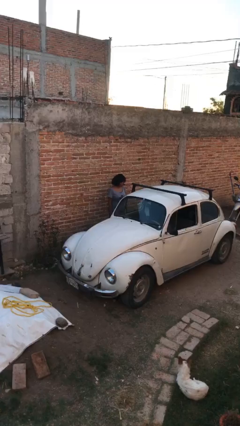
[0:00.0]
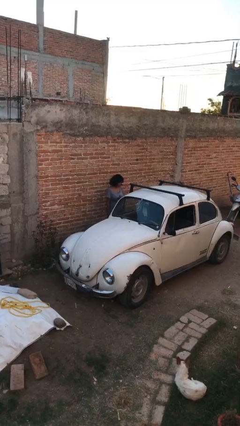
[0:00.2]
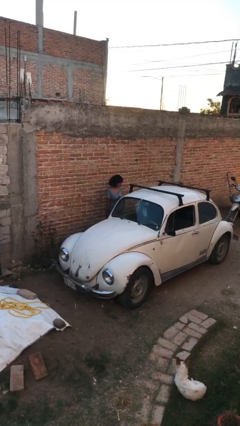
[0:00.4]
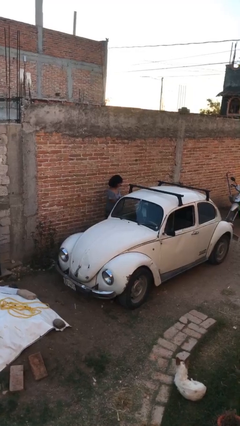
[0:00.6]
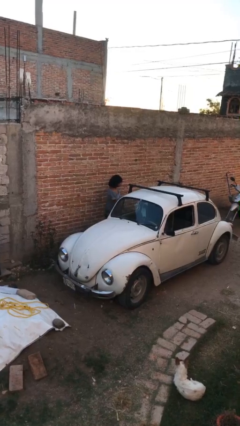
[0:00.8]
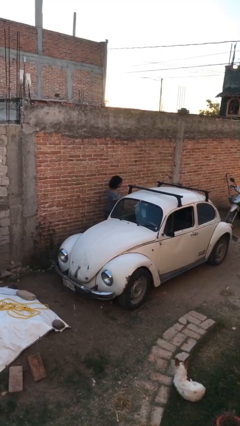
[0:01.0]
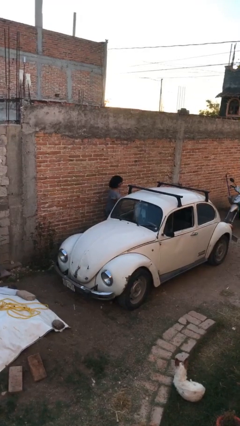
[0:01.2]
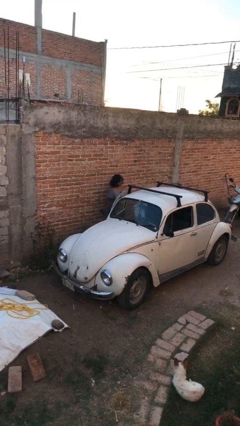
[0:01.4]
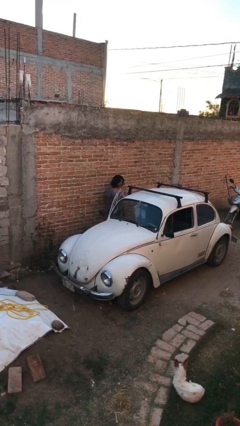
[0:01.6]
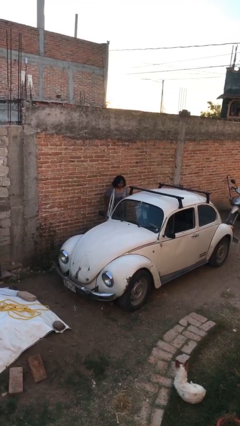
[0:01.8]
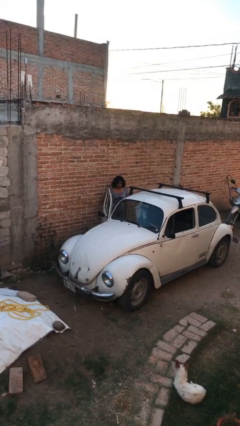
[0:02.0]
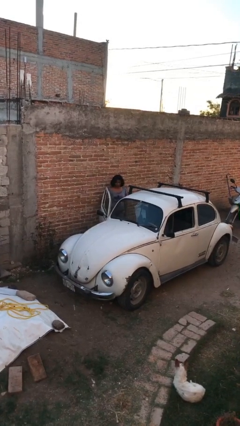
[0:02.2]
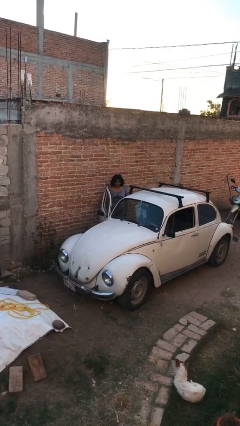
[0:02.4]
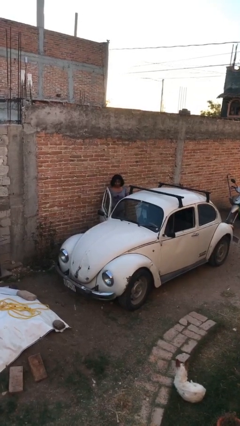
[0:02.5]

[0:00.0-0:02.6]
person opens car door

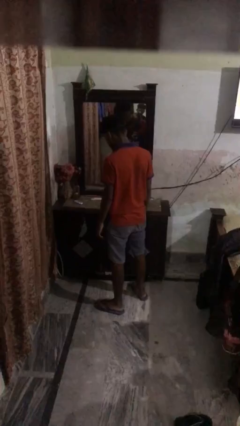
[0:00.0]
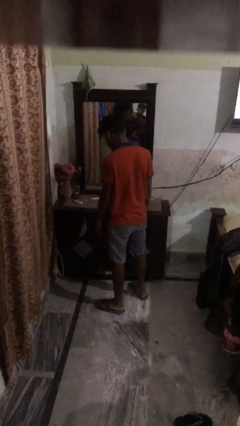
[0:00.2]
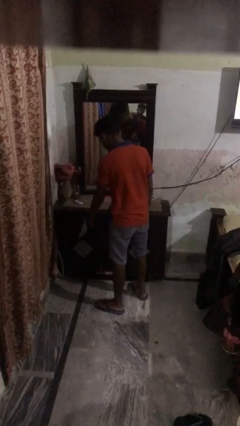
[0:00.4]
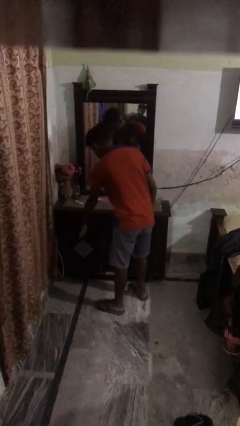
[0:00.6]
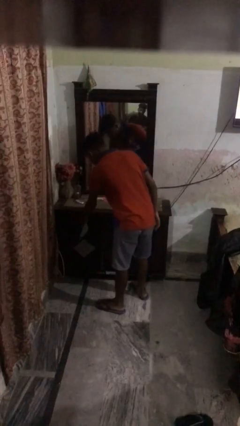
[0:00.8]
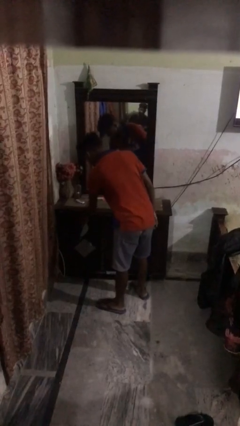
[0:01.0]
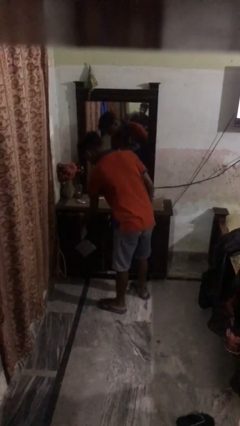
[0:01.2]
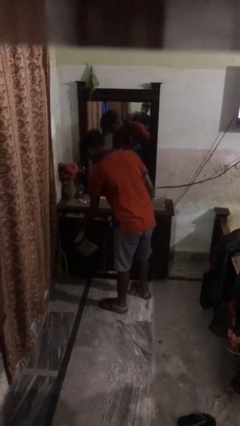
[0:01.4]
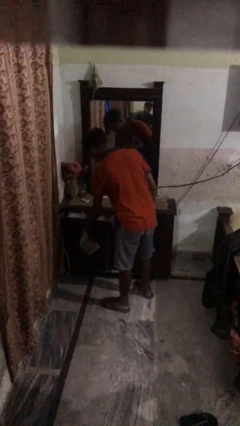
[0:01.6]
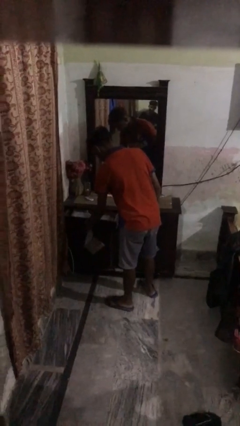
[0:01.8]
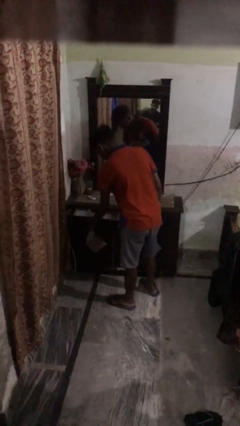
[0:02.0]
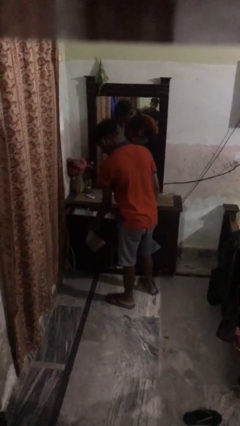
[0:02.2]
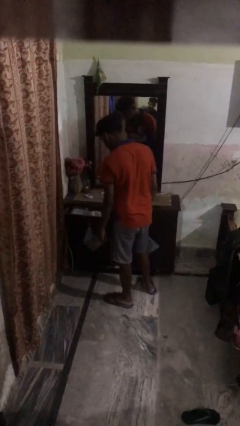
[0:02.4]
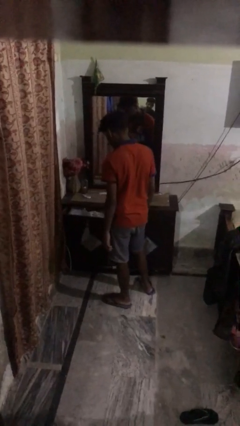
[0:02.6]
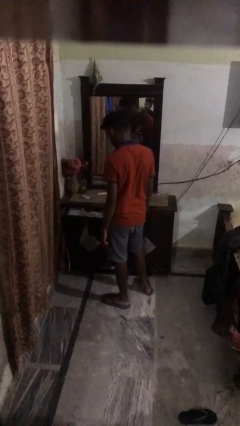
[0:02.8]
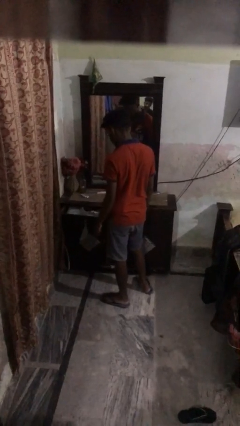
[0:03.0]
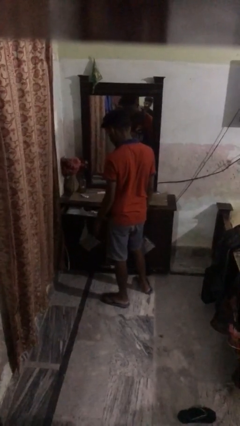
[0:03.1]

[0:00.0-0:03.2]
person opens dresser drawer

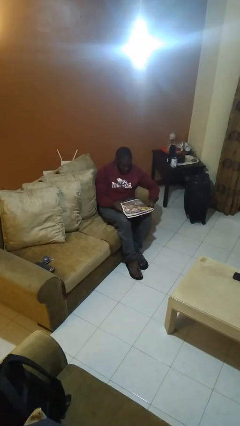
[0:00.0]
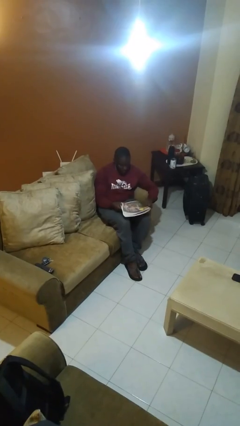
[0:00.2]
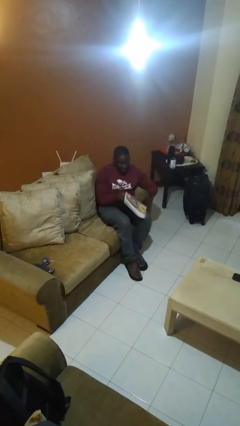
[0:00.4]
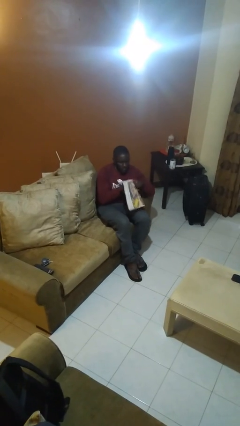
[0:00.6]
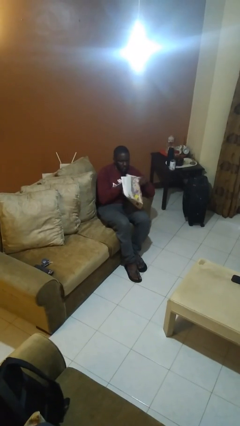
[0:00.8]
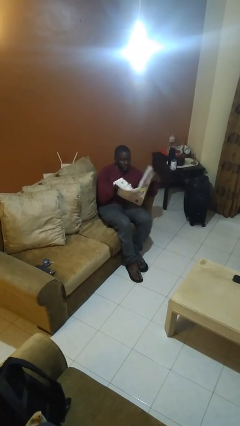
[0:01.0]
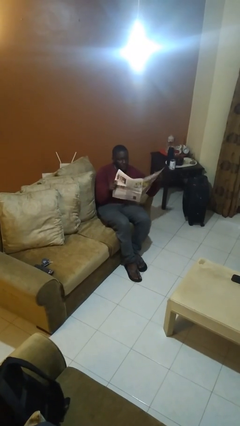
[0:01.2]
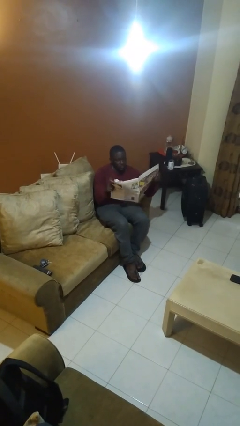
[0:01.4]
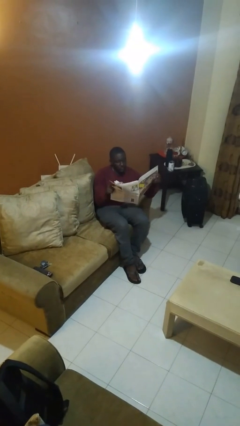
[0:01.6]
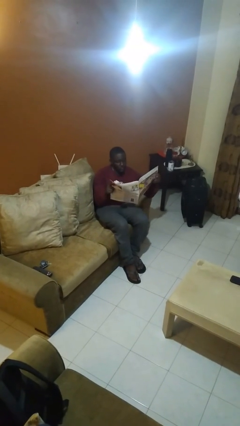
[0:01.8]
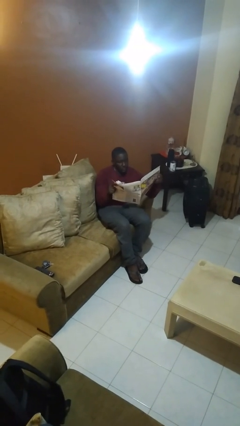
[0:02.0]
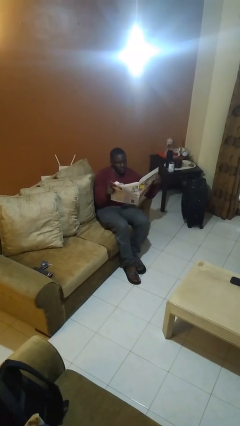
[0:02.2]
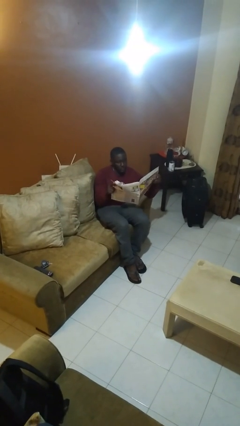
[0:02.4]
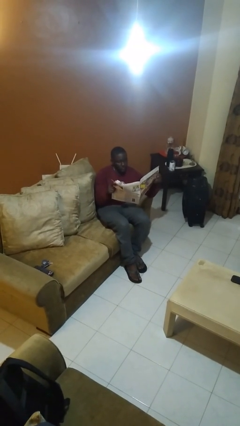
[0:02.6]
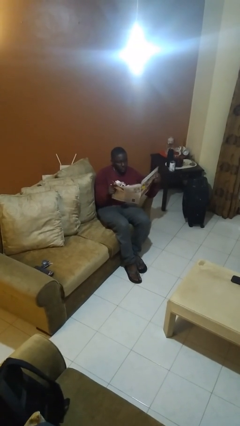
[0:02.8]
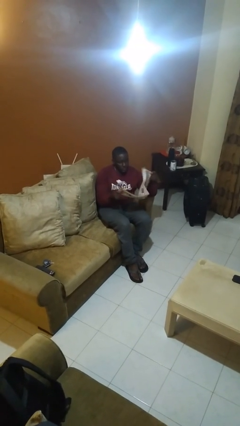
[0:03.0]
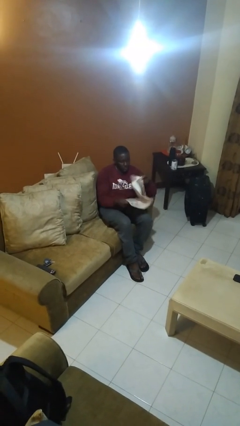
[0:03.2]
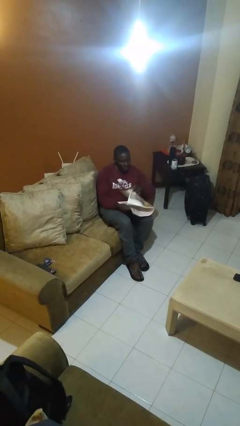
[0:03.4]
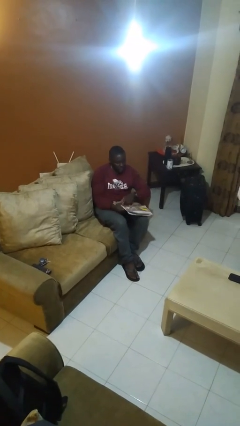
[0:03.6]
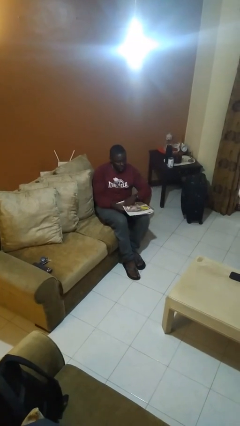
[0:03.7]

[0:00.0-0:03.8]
person reads newspaper

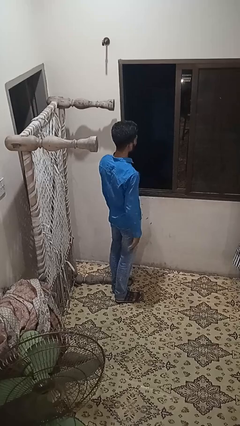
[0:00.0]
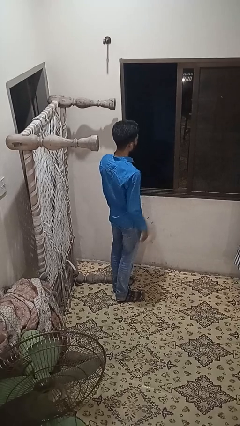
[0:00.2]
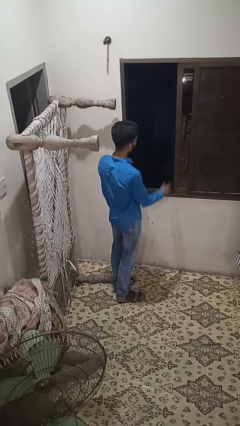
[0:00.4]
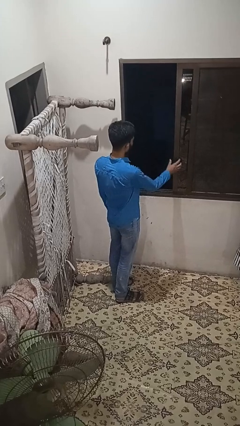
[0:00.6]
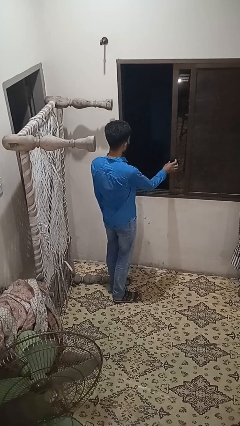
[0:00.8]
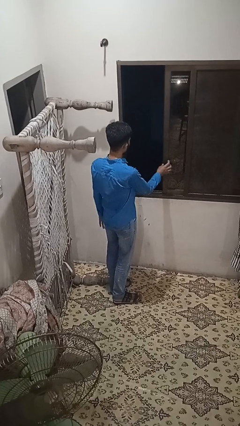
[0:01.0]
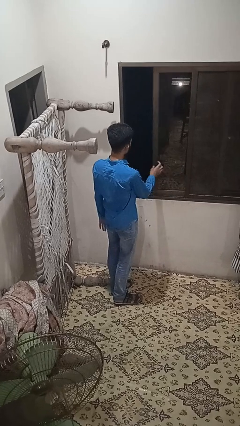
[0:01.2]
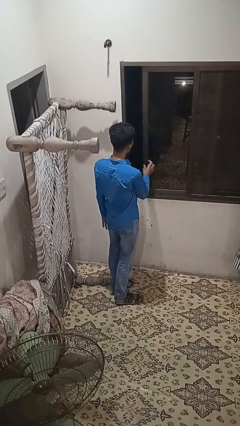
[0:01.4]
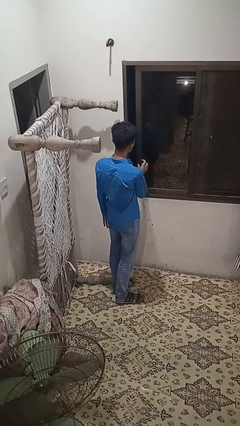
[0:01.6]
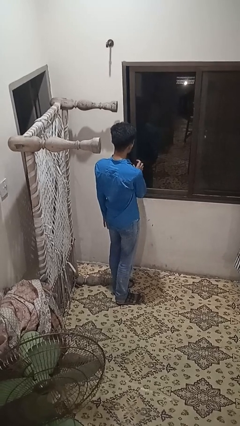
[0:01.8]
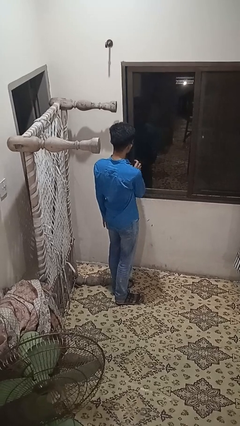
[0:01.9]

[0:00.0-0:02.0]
person closes home window

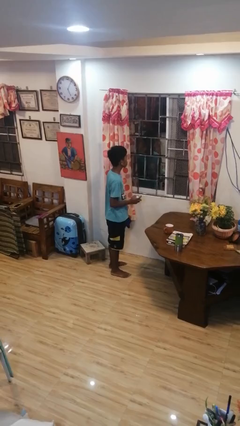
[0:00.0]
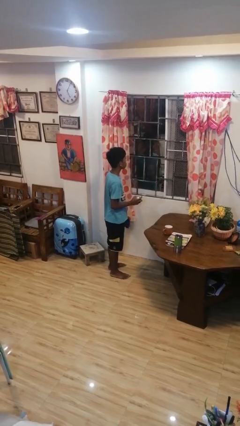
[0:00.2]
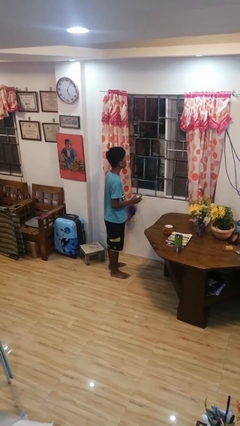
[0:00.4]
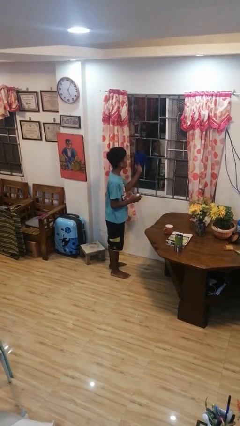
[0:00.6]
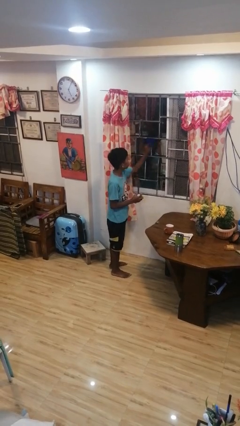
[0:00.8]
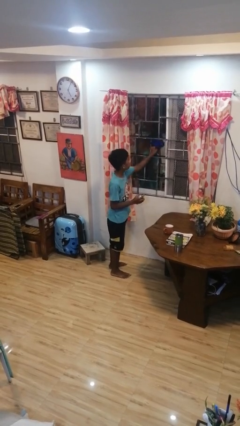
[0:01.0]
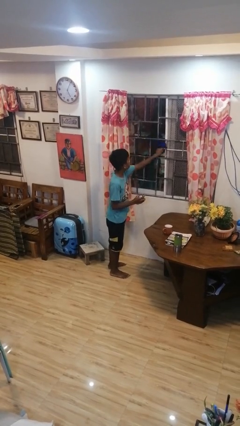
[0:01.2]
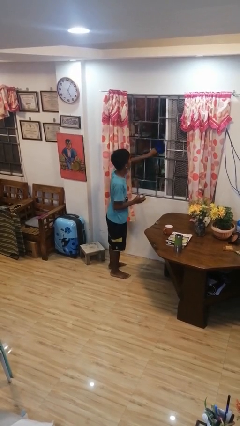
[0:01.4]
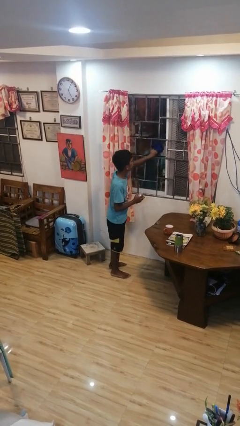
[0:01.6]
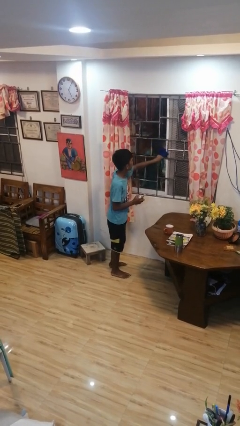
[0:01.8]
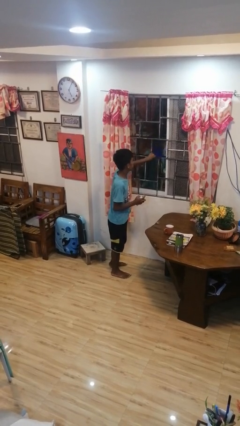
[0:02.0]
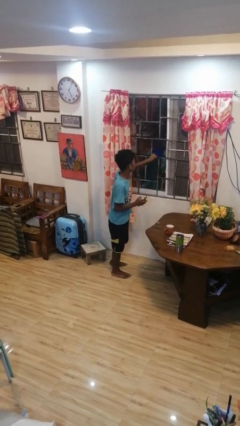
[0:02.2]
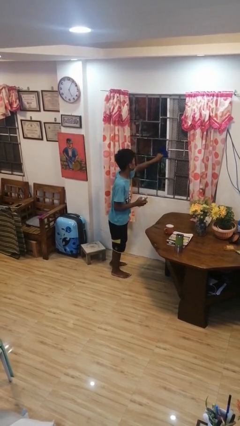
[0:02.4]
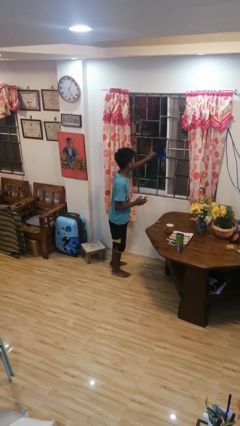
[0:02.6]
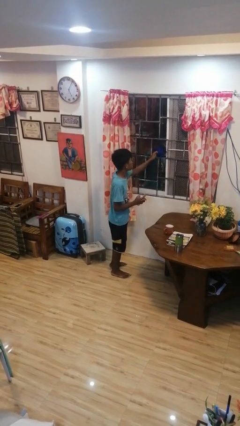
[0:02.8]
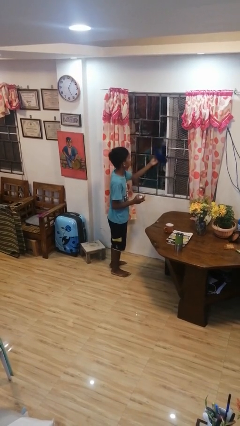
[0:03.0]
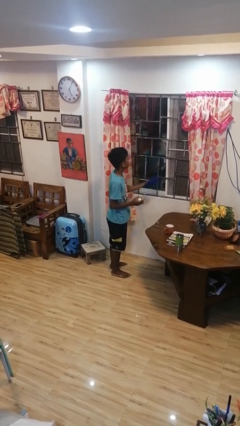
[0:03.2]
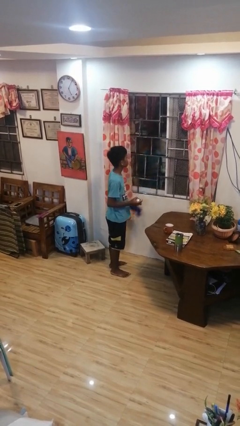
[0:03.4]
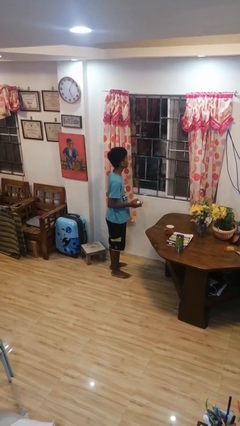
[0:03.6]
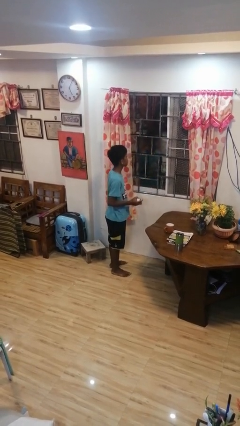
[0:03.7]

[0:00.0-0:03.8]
person washes window

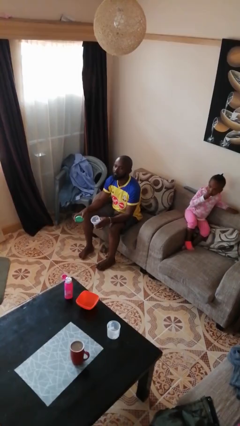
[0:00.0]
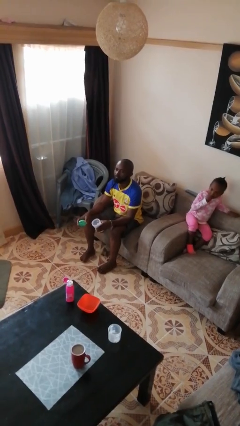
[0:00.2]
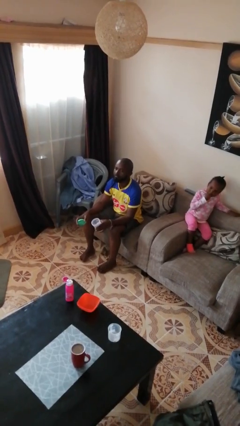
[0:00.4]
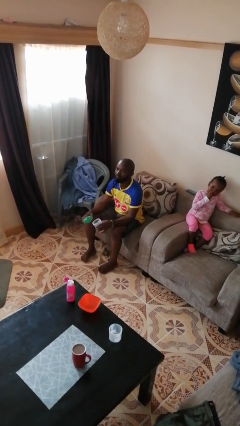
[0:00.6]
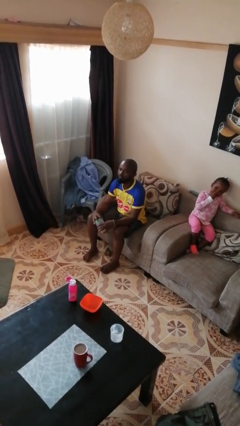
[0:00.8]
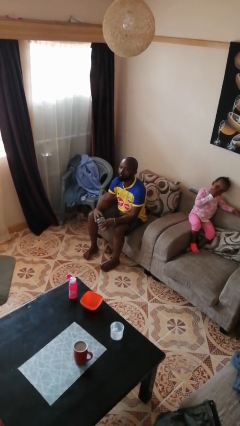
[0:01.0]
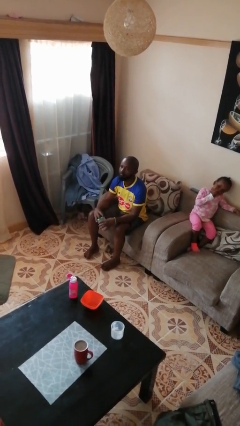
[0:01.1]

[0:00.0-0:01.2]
person closes jar

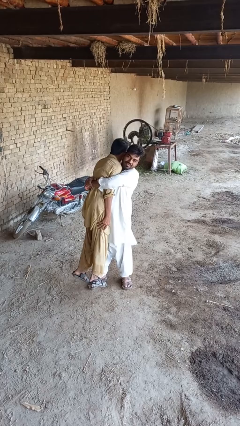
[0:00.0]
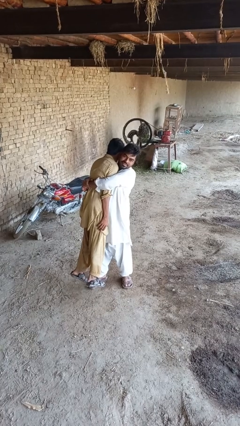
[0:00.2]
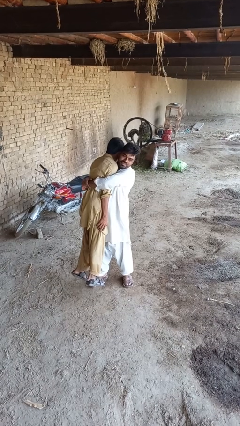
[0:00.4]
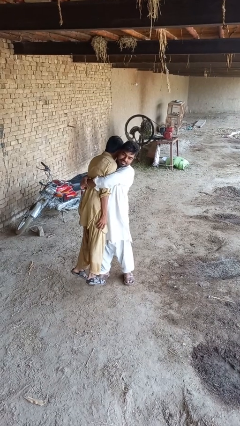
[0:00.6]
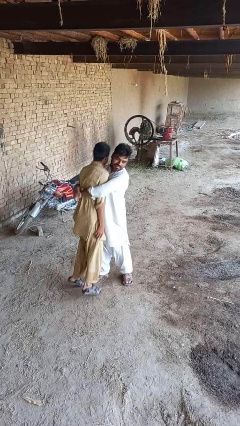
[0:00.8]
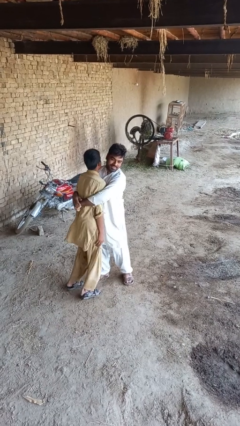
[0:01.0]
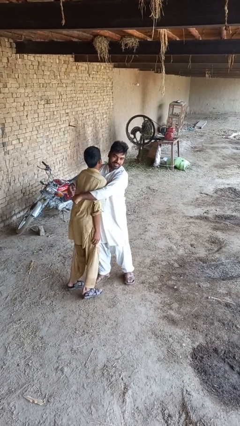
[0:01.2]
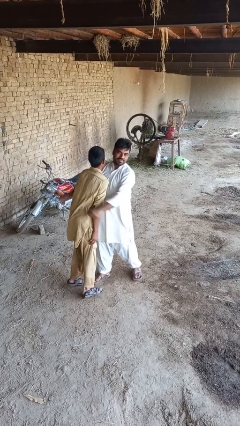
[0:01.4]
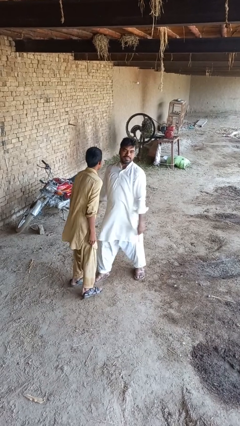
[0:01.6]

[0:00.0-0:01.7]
person puts down person
